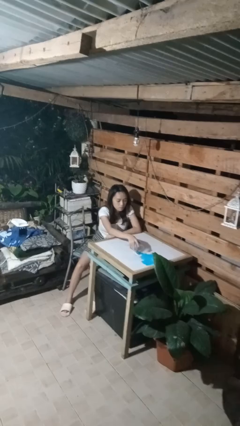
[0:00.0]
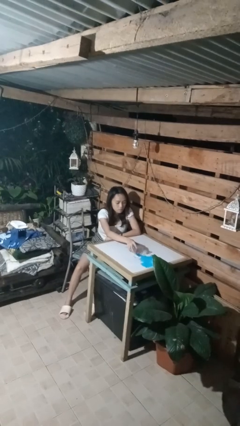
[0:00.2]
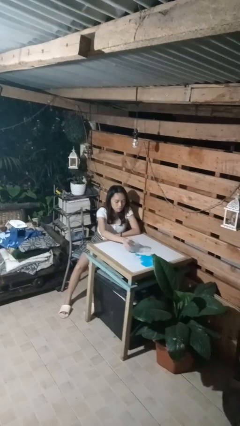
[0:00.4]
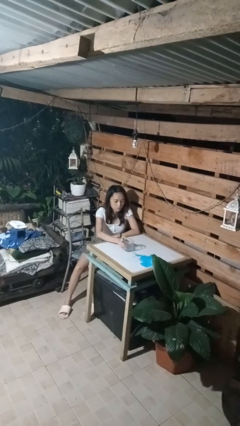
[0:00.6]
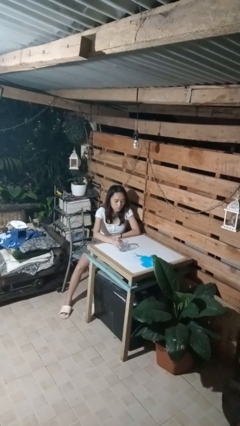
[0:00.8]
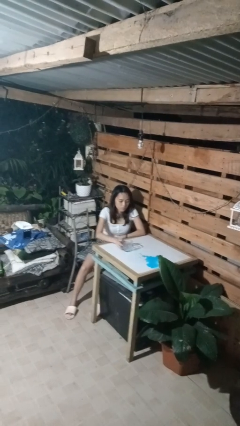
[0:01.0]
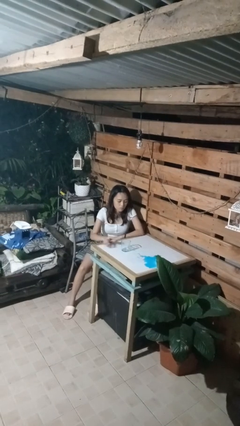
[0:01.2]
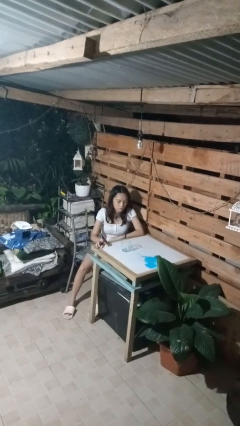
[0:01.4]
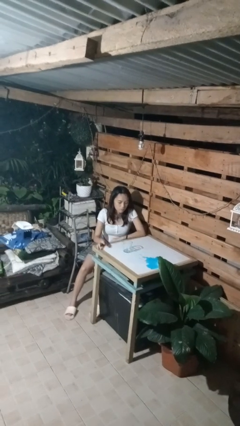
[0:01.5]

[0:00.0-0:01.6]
person sets upright glass

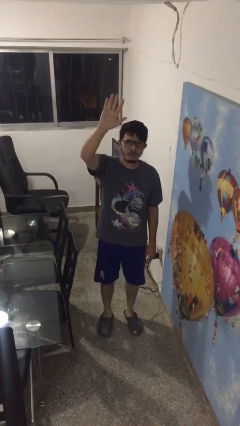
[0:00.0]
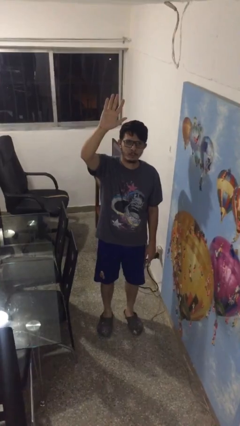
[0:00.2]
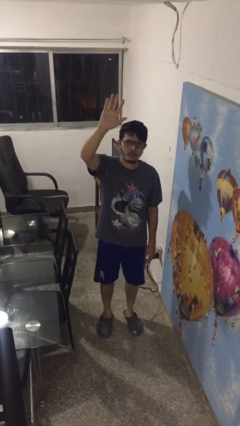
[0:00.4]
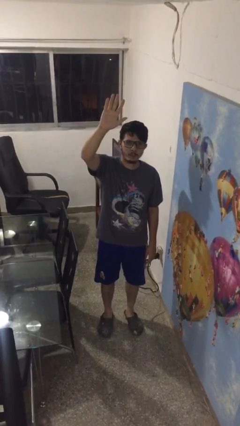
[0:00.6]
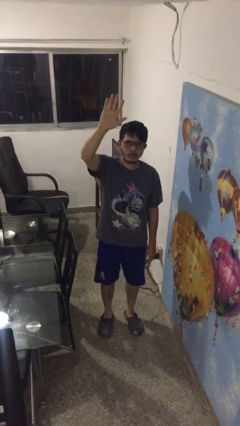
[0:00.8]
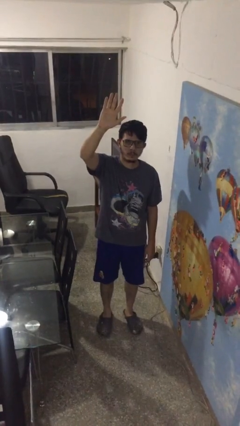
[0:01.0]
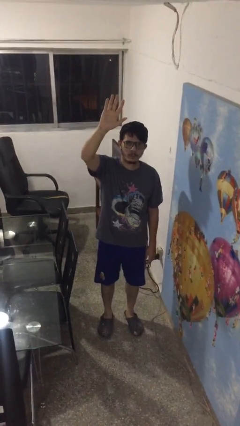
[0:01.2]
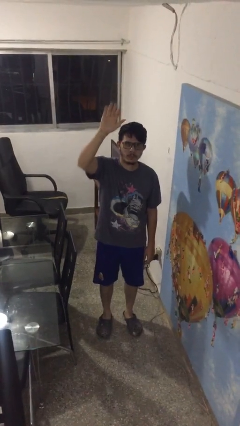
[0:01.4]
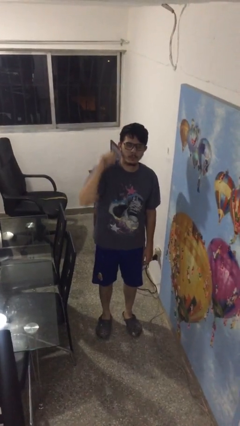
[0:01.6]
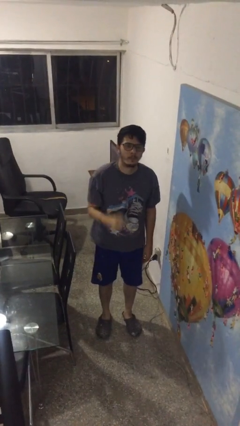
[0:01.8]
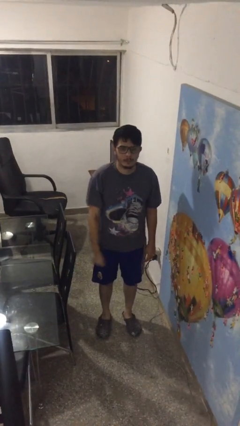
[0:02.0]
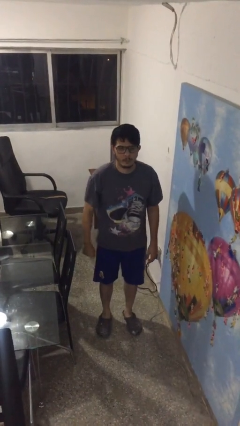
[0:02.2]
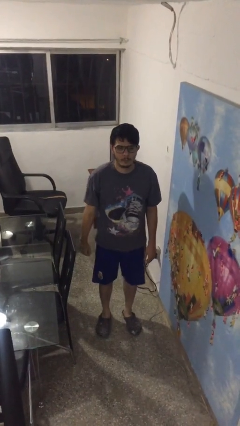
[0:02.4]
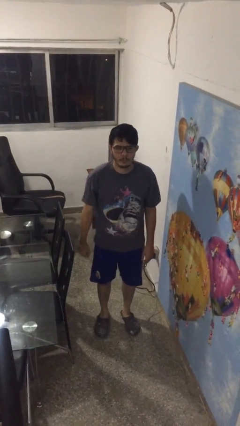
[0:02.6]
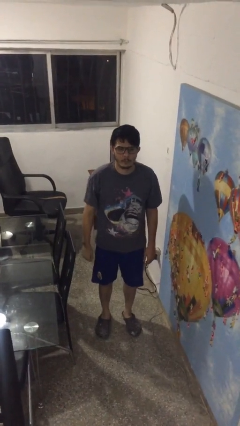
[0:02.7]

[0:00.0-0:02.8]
person gestures lower hand

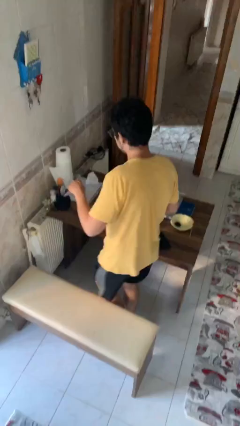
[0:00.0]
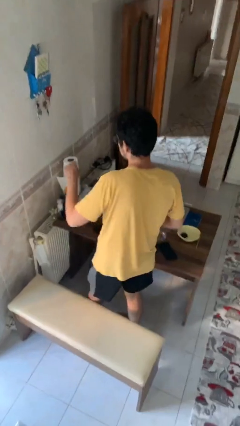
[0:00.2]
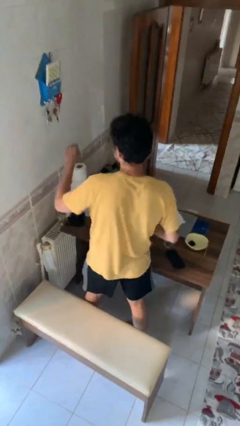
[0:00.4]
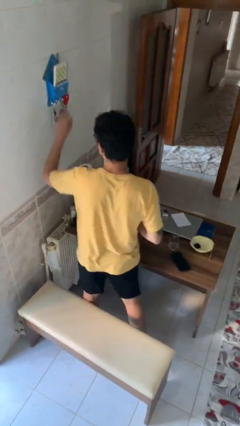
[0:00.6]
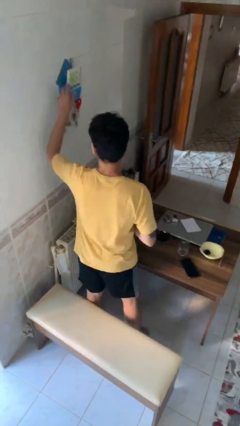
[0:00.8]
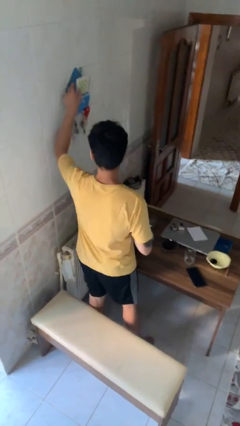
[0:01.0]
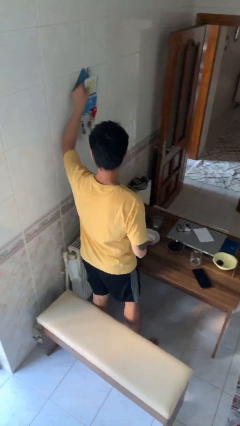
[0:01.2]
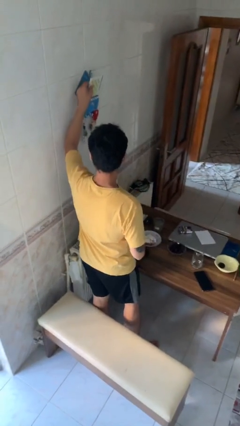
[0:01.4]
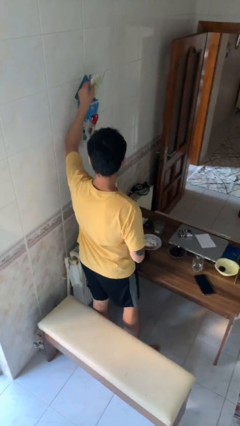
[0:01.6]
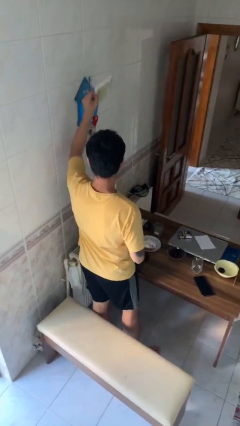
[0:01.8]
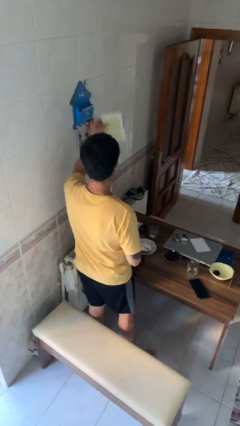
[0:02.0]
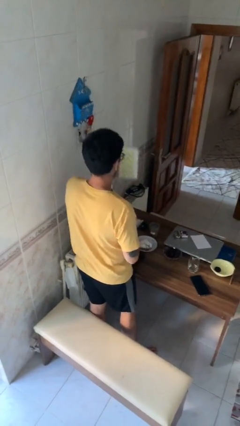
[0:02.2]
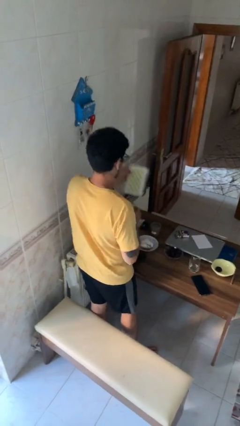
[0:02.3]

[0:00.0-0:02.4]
person picks up object from shelf

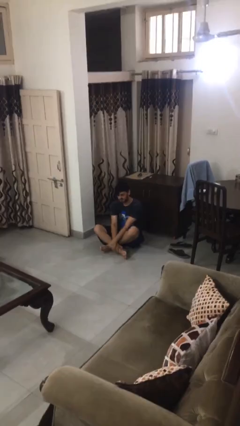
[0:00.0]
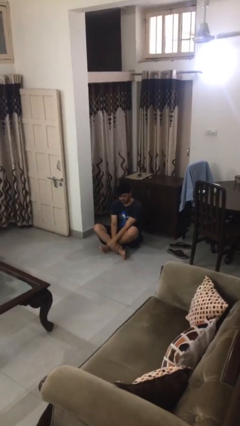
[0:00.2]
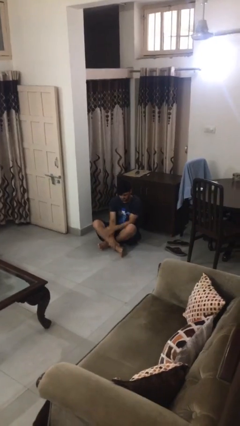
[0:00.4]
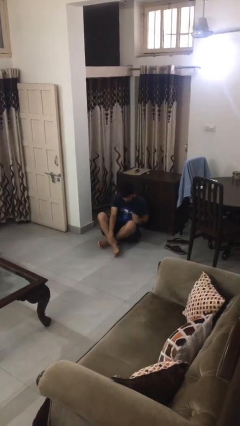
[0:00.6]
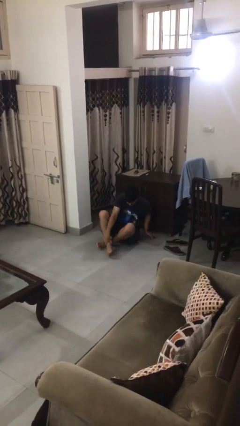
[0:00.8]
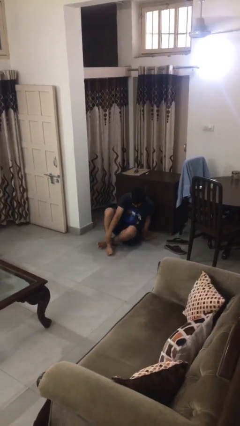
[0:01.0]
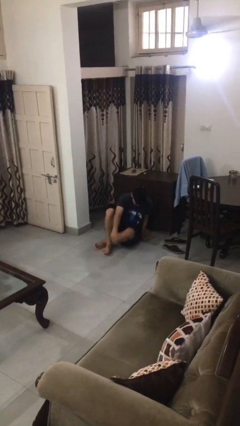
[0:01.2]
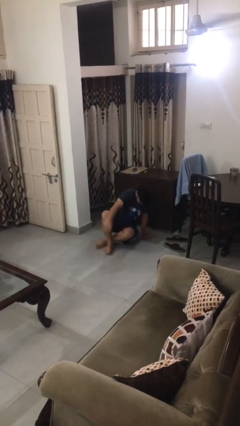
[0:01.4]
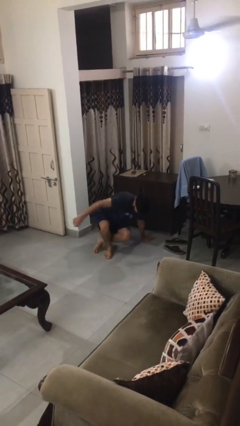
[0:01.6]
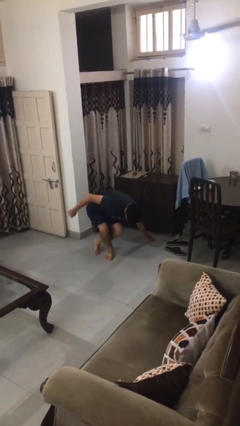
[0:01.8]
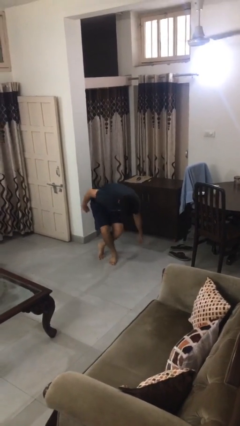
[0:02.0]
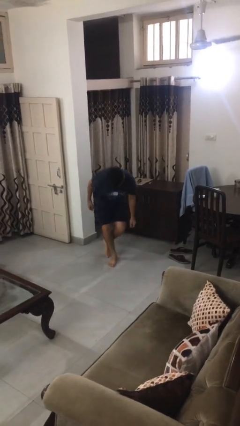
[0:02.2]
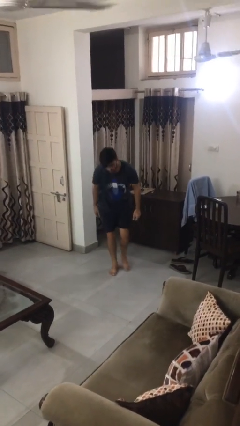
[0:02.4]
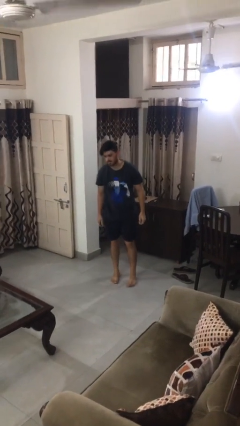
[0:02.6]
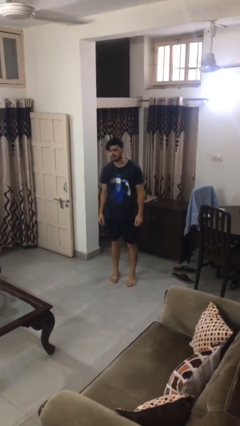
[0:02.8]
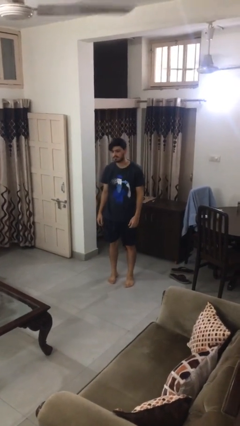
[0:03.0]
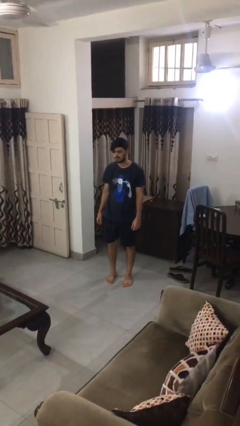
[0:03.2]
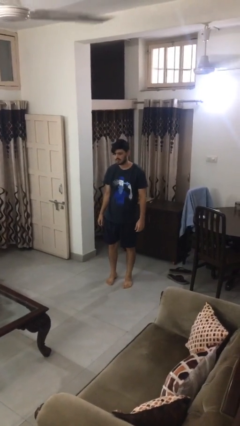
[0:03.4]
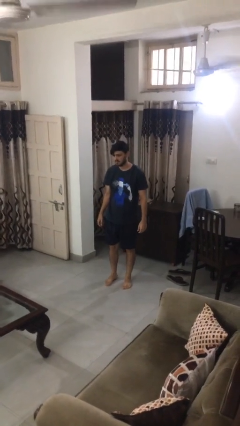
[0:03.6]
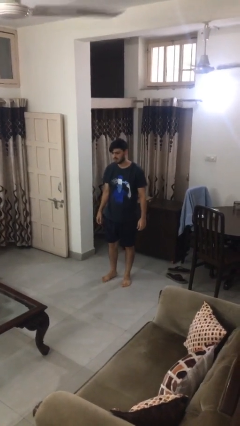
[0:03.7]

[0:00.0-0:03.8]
person stands up from floor

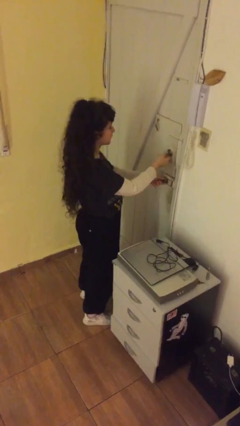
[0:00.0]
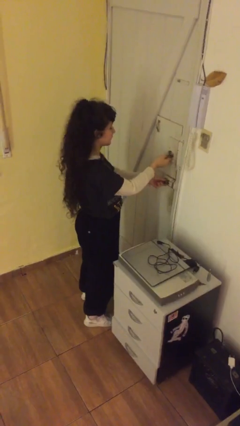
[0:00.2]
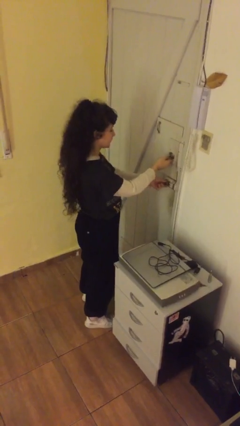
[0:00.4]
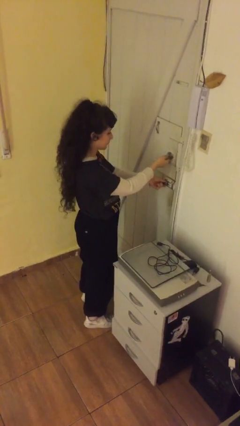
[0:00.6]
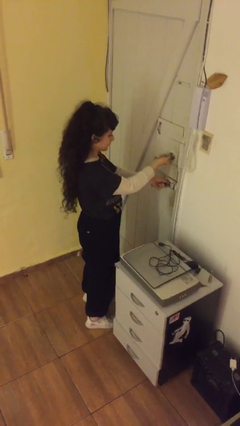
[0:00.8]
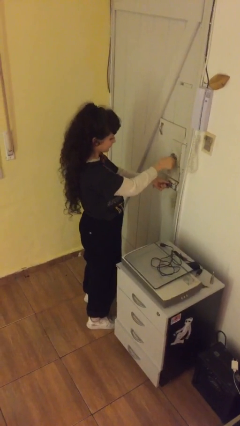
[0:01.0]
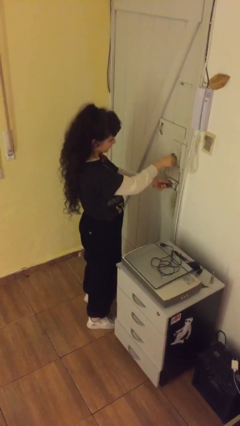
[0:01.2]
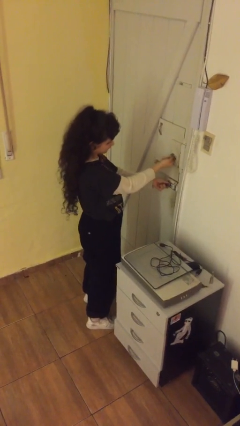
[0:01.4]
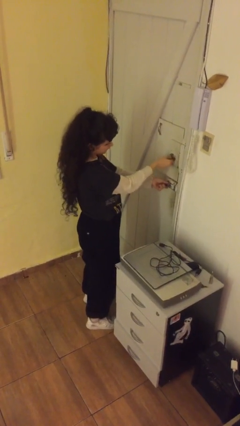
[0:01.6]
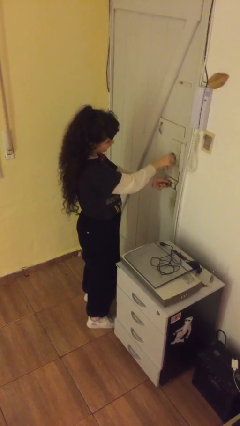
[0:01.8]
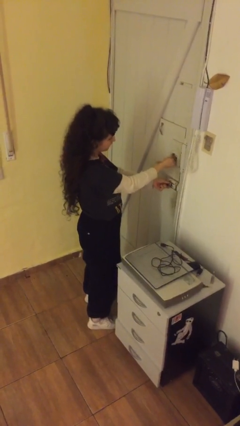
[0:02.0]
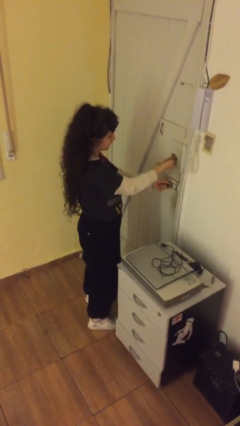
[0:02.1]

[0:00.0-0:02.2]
person locks door with keys

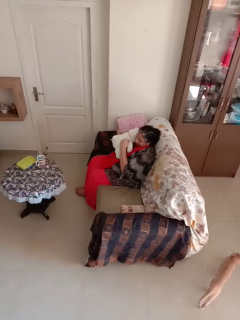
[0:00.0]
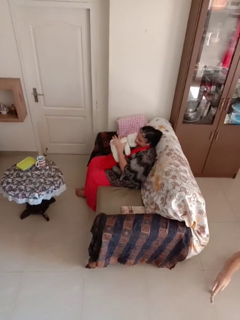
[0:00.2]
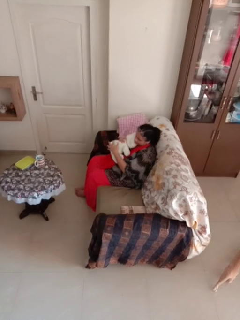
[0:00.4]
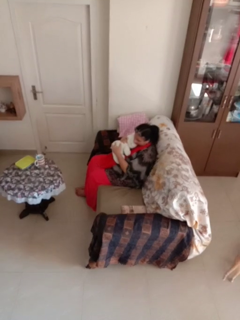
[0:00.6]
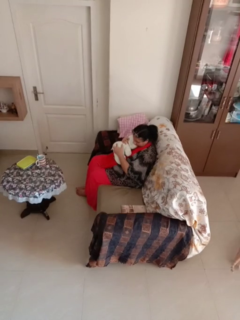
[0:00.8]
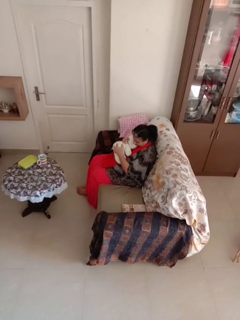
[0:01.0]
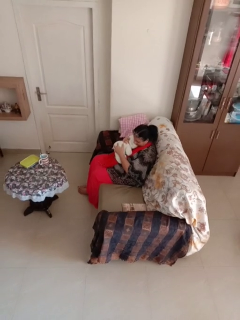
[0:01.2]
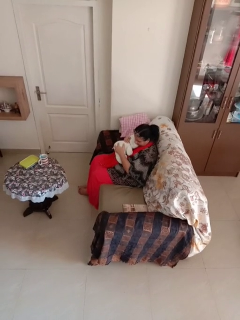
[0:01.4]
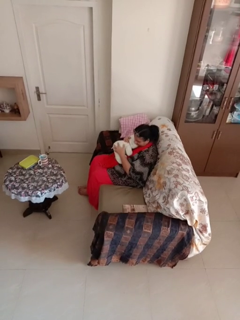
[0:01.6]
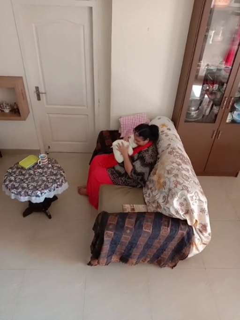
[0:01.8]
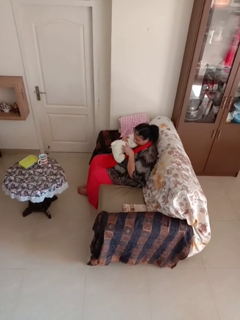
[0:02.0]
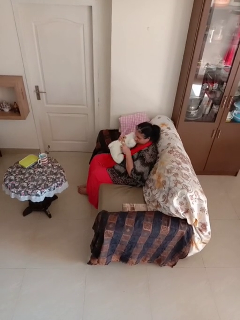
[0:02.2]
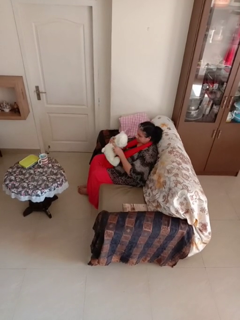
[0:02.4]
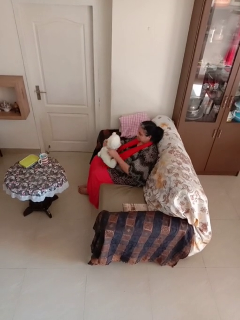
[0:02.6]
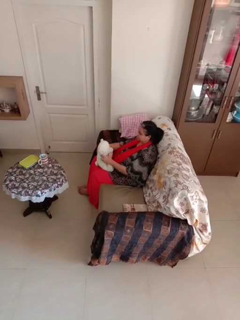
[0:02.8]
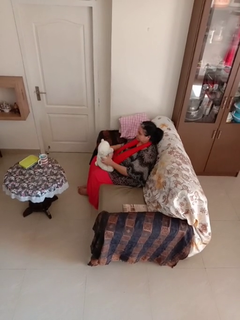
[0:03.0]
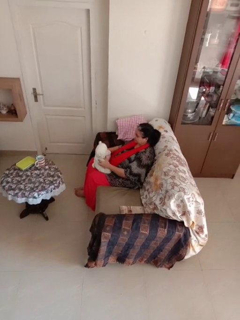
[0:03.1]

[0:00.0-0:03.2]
person hugs stuffed animal

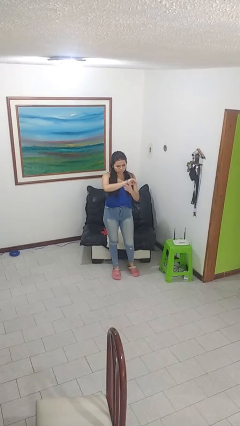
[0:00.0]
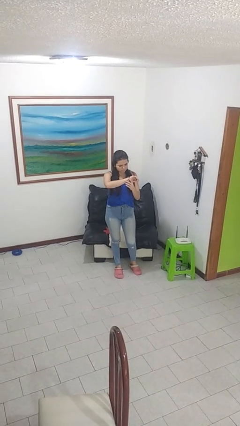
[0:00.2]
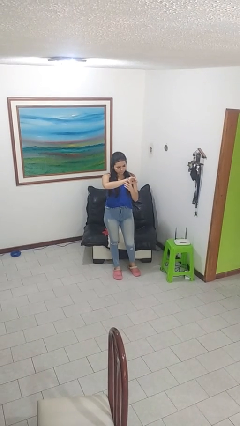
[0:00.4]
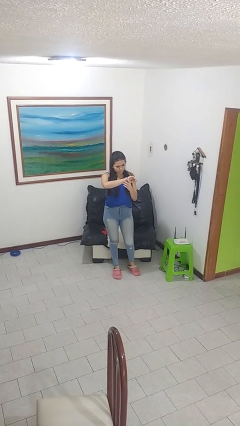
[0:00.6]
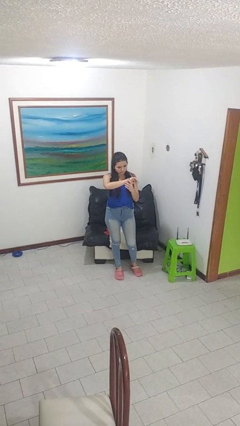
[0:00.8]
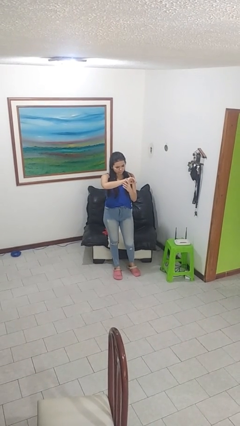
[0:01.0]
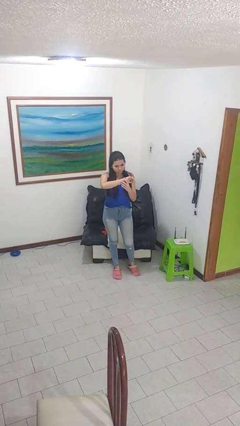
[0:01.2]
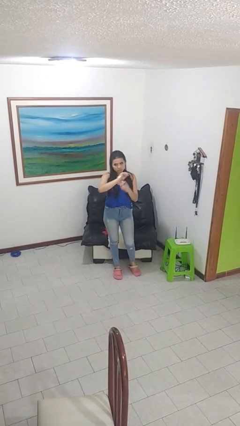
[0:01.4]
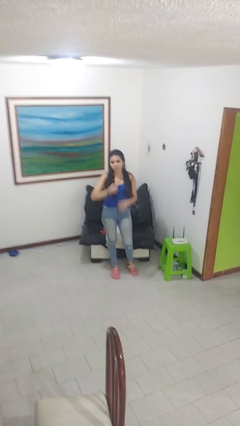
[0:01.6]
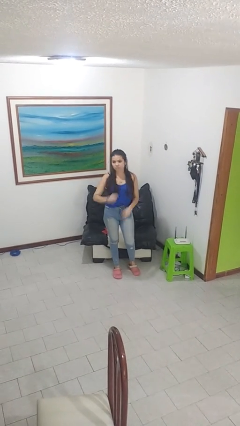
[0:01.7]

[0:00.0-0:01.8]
person looks at wristwatch

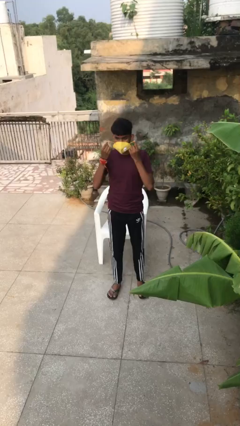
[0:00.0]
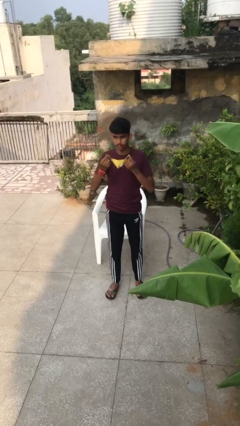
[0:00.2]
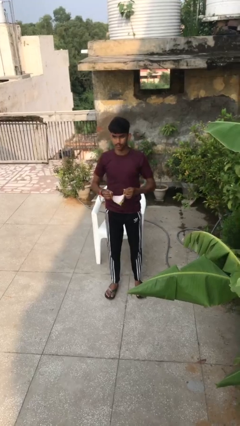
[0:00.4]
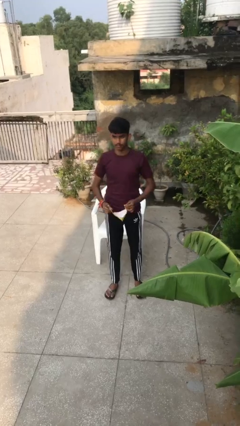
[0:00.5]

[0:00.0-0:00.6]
person takes off facemask
